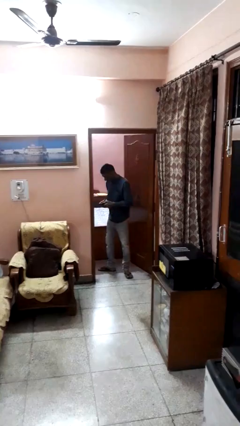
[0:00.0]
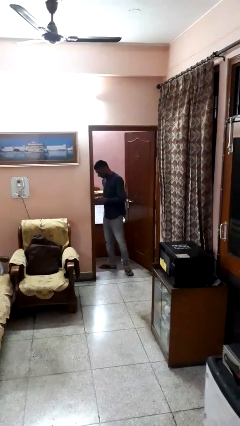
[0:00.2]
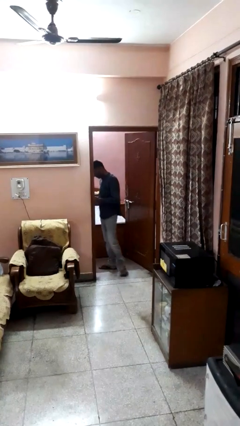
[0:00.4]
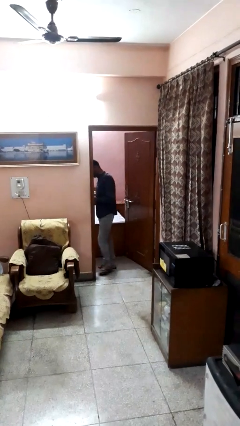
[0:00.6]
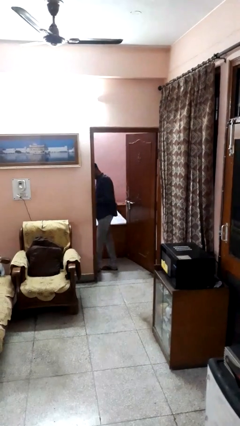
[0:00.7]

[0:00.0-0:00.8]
person exits scene through structure

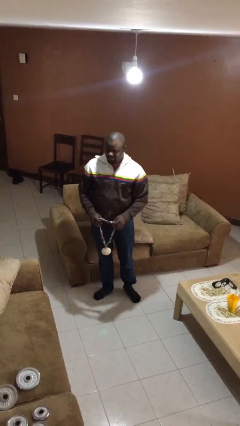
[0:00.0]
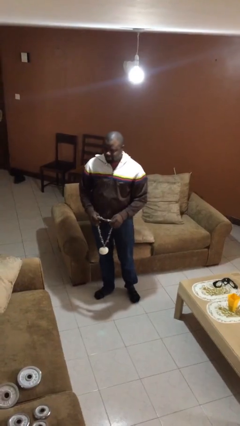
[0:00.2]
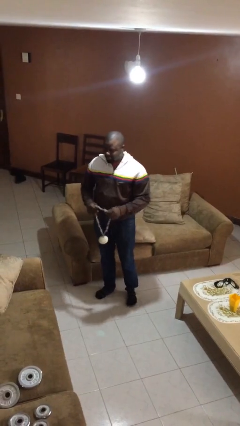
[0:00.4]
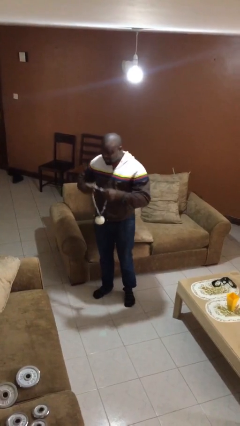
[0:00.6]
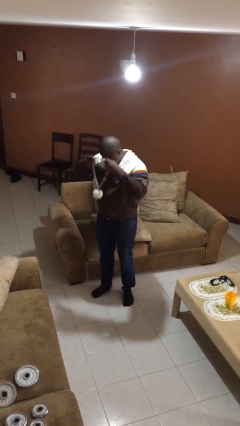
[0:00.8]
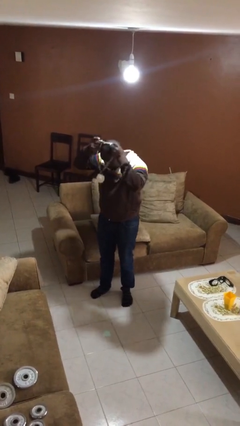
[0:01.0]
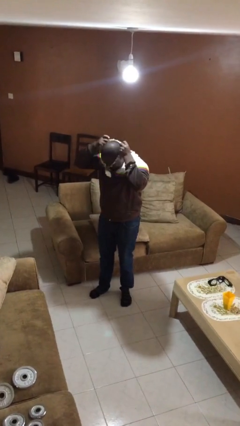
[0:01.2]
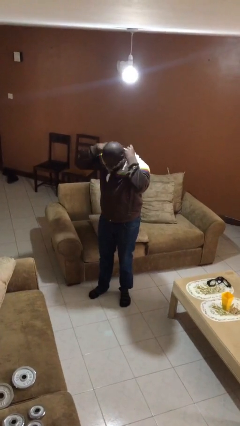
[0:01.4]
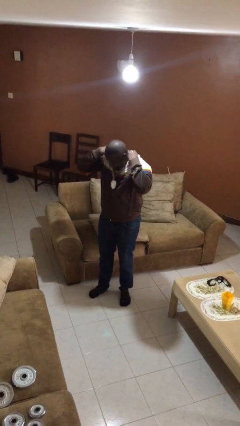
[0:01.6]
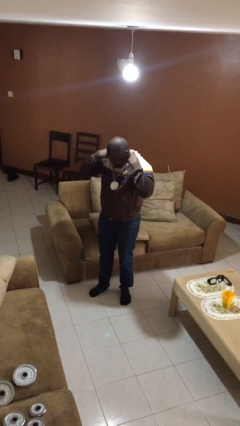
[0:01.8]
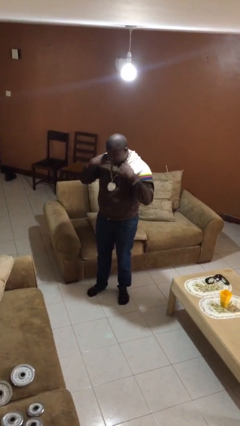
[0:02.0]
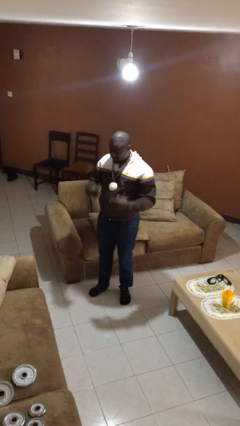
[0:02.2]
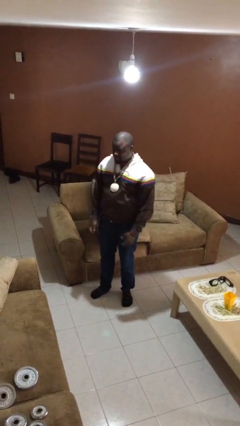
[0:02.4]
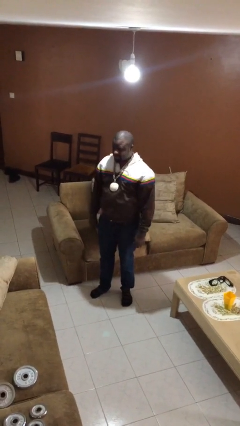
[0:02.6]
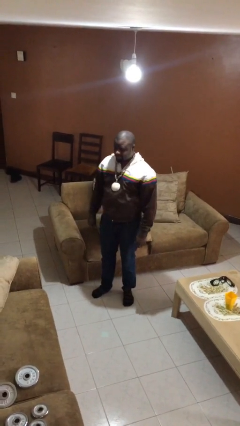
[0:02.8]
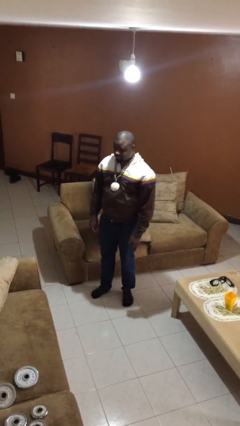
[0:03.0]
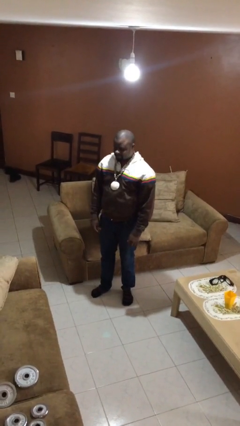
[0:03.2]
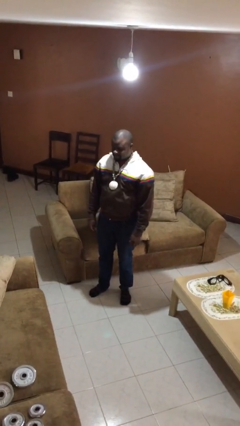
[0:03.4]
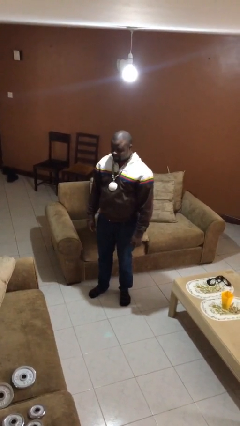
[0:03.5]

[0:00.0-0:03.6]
person puts on necklace

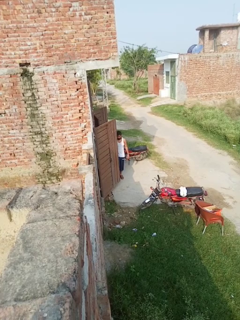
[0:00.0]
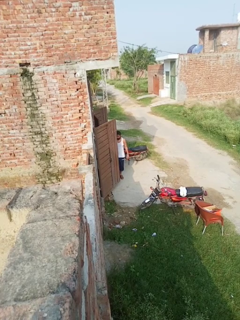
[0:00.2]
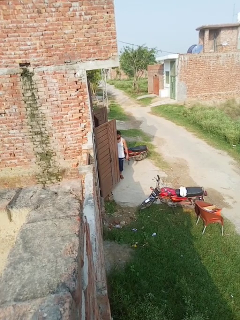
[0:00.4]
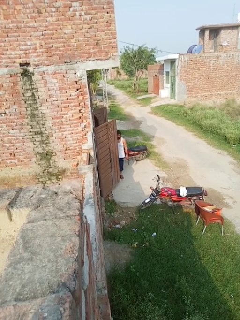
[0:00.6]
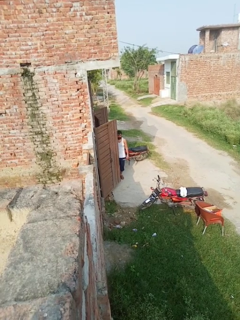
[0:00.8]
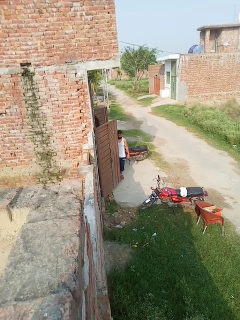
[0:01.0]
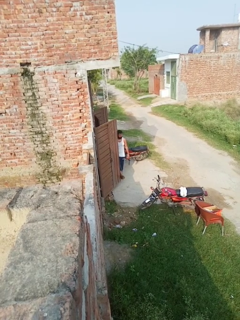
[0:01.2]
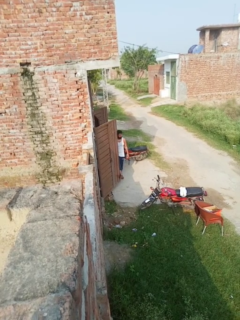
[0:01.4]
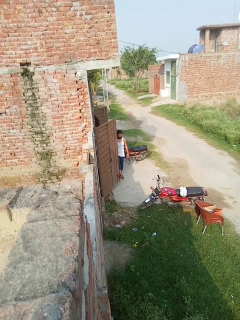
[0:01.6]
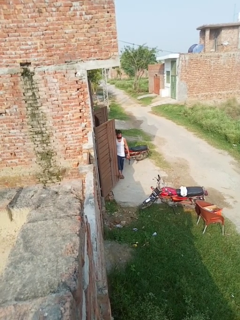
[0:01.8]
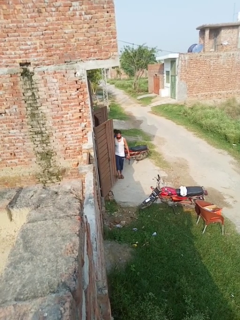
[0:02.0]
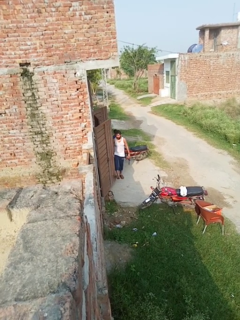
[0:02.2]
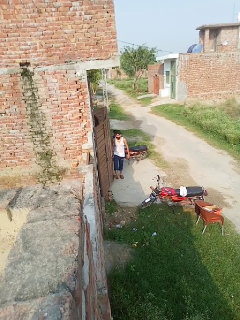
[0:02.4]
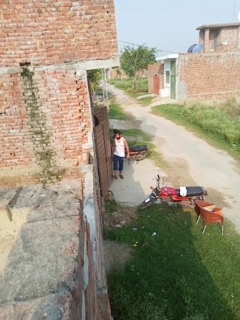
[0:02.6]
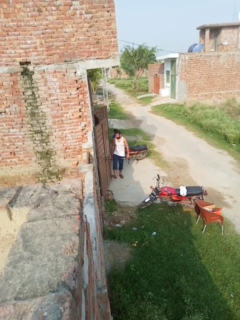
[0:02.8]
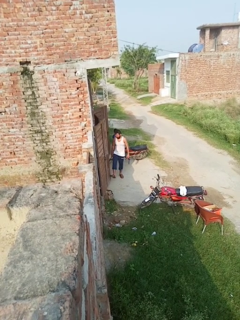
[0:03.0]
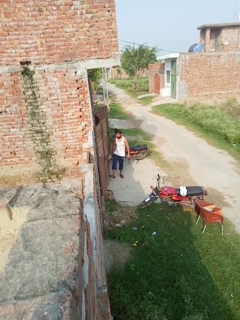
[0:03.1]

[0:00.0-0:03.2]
person closes door with foot

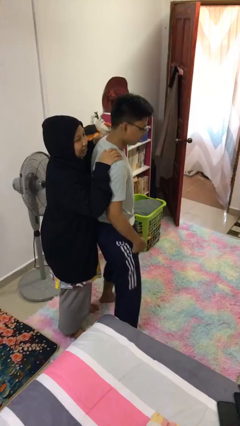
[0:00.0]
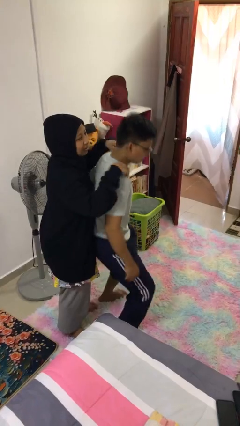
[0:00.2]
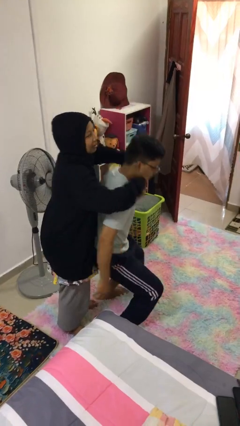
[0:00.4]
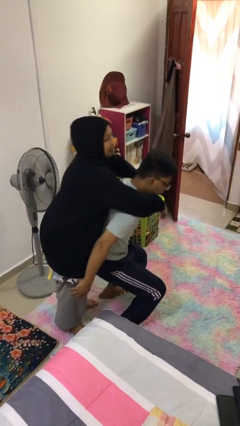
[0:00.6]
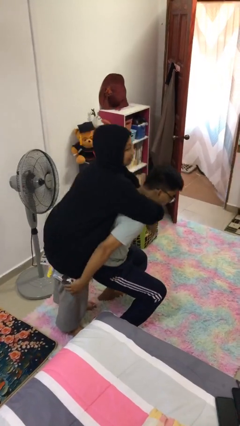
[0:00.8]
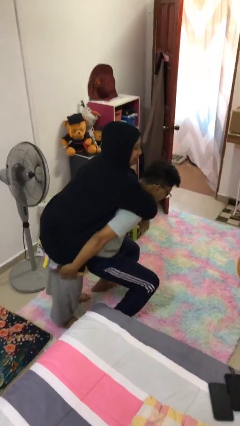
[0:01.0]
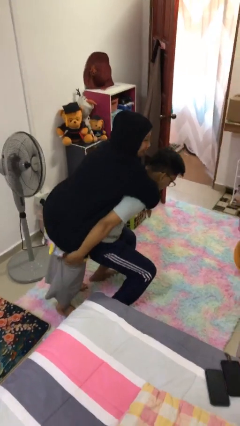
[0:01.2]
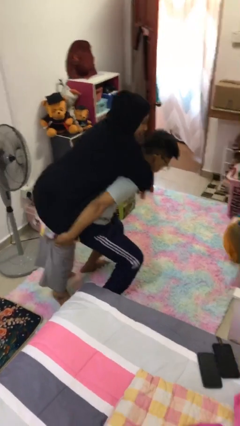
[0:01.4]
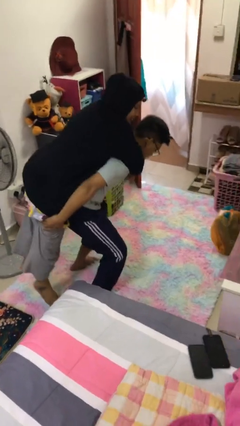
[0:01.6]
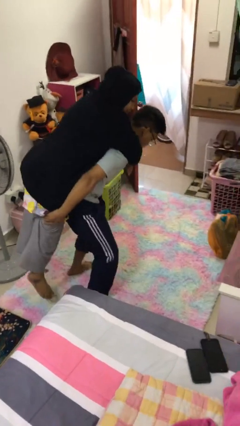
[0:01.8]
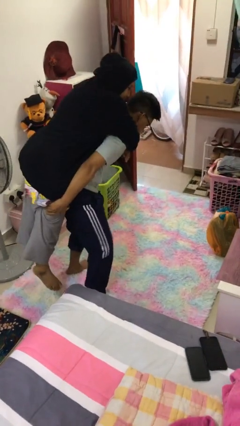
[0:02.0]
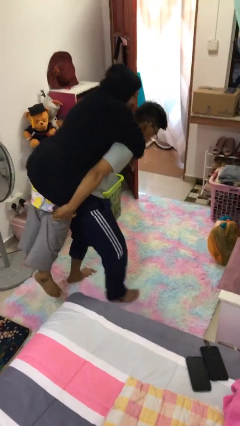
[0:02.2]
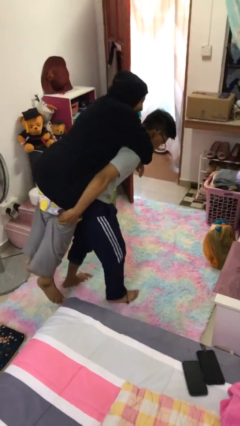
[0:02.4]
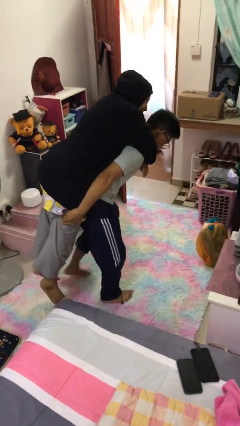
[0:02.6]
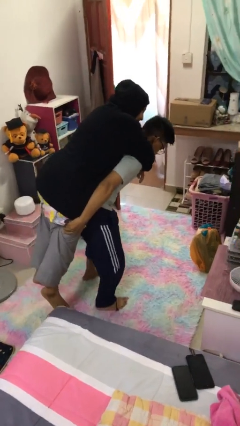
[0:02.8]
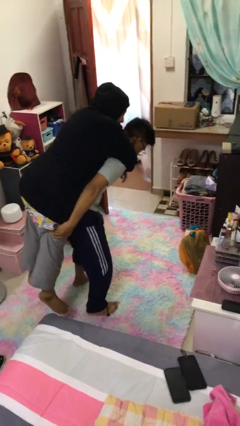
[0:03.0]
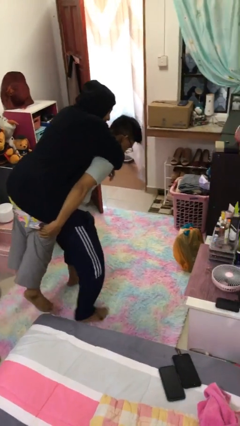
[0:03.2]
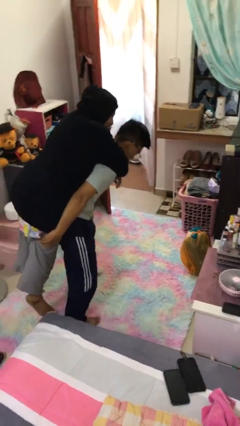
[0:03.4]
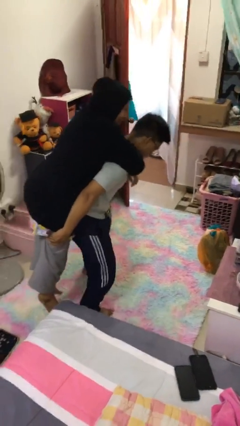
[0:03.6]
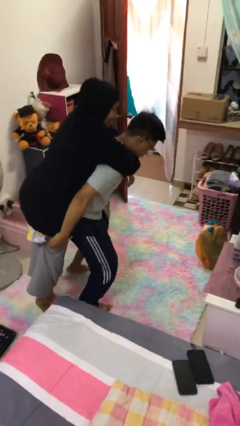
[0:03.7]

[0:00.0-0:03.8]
person carries person on back

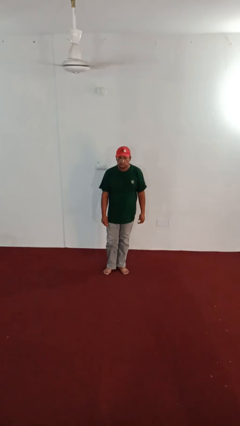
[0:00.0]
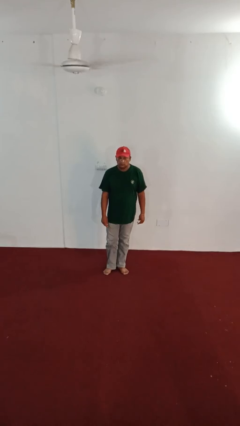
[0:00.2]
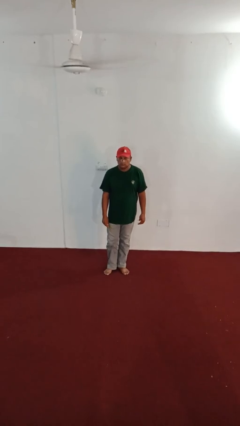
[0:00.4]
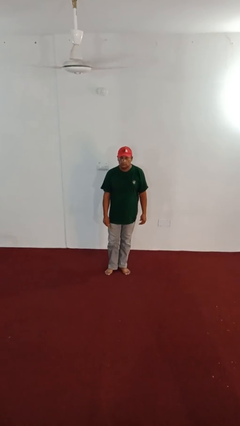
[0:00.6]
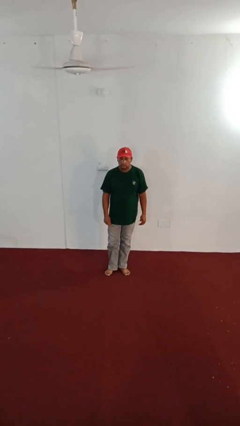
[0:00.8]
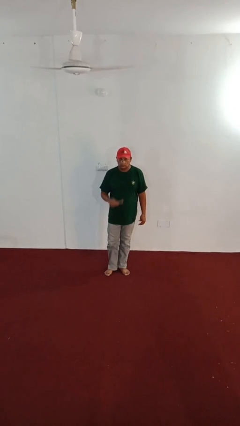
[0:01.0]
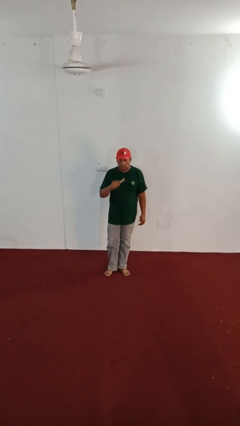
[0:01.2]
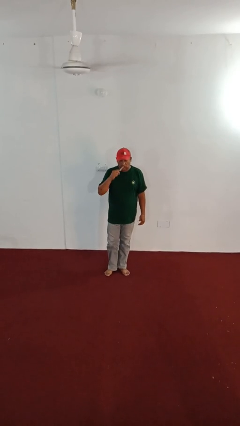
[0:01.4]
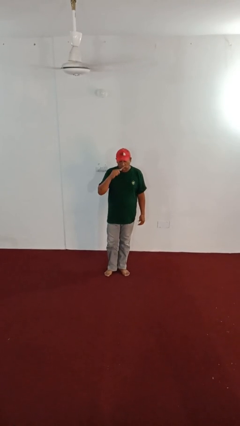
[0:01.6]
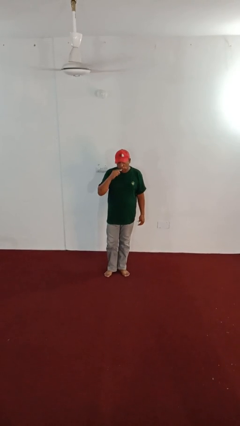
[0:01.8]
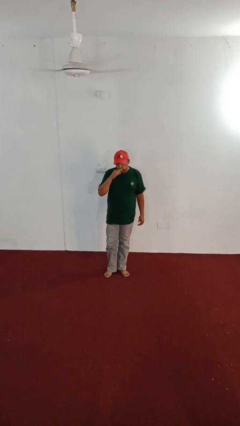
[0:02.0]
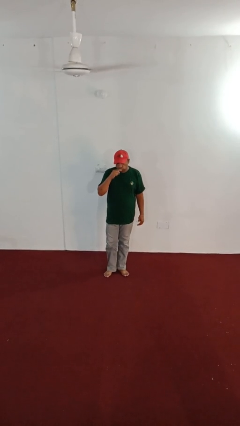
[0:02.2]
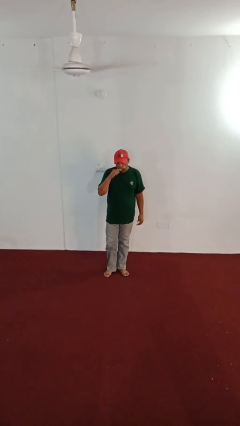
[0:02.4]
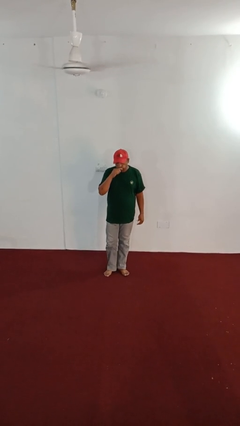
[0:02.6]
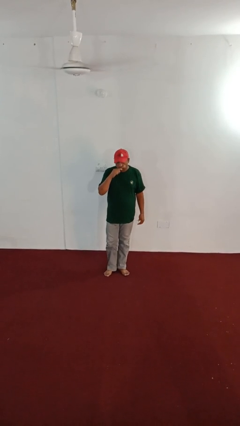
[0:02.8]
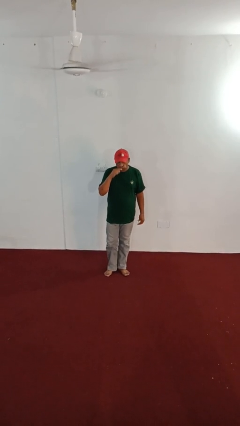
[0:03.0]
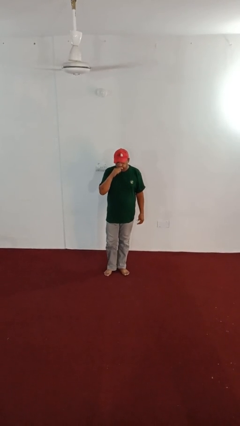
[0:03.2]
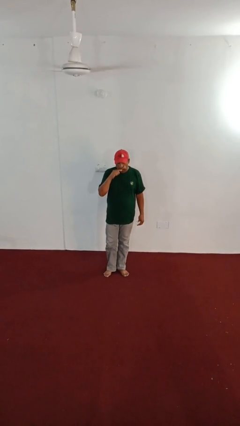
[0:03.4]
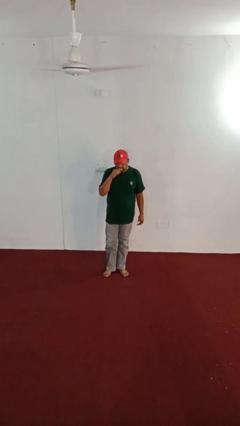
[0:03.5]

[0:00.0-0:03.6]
person brushes teeth

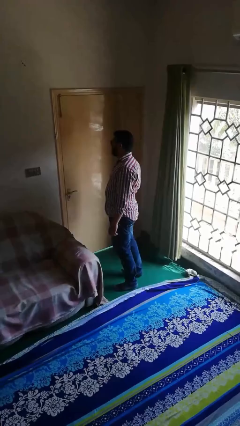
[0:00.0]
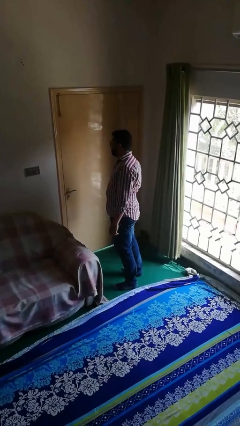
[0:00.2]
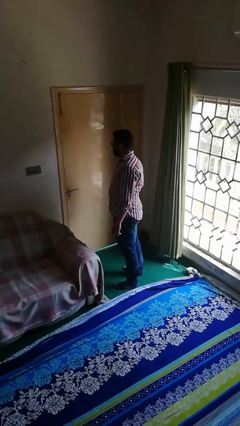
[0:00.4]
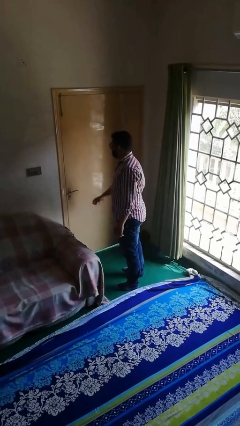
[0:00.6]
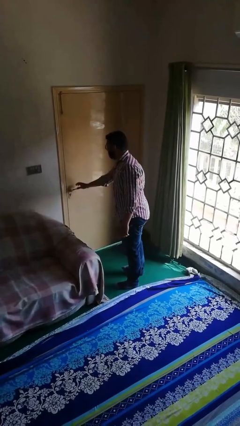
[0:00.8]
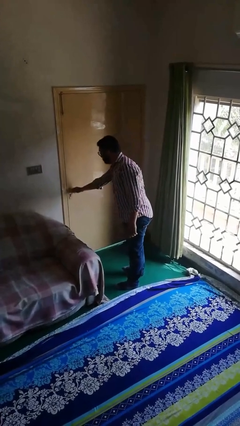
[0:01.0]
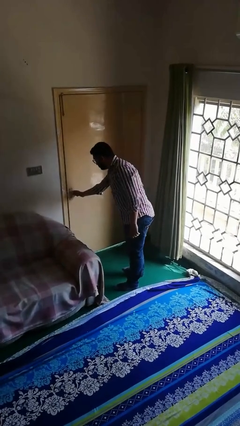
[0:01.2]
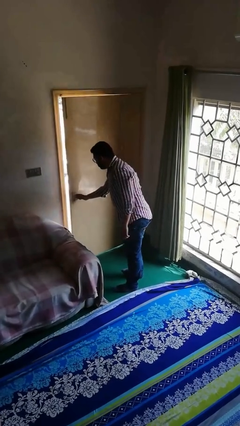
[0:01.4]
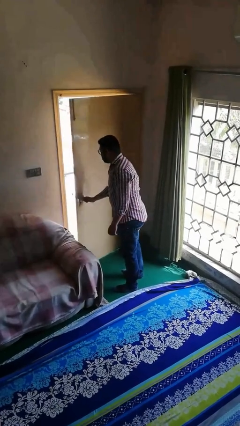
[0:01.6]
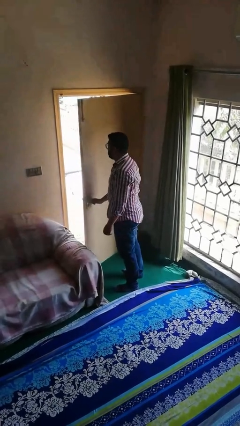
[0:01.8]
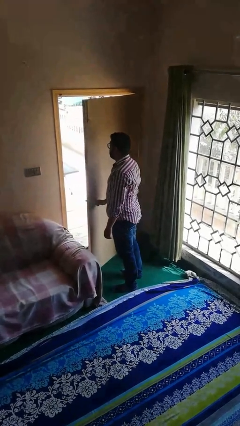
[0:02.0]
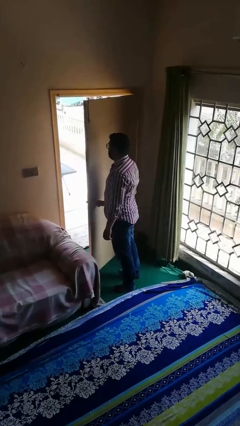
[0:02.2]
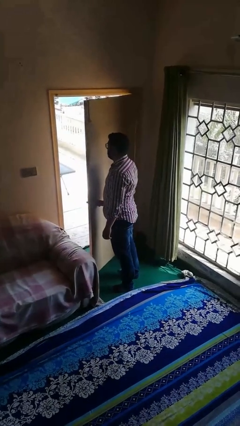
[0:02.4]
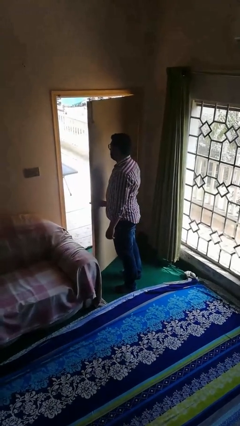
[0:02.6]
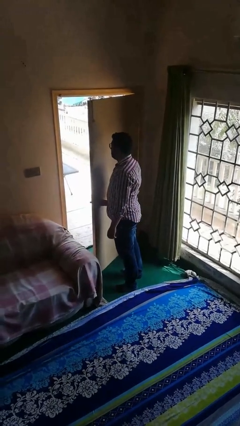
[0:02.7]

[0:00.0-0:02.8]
person opens facility door

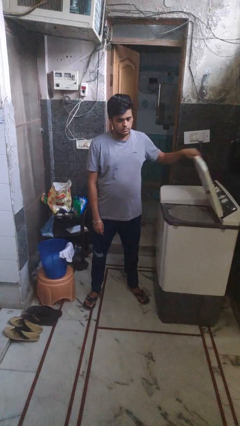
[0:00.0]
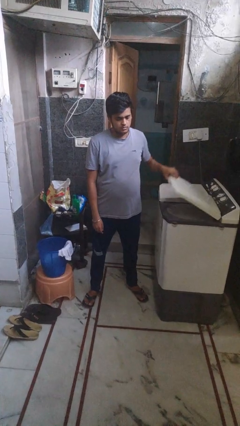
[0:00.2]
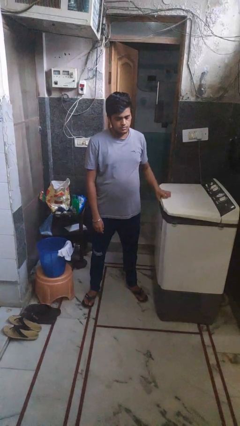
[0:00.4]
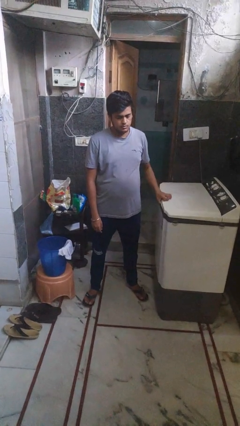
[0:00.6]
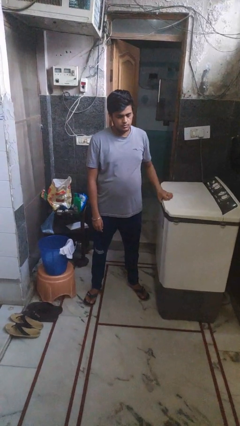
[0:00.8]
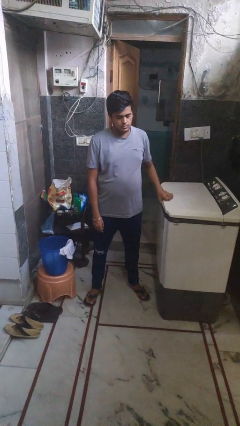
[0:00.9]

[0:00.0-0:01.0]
person closes clothes washer
